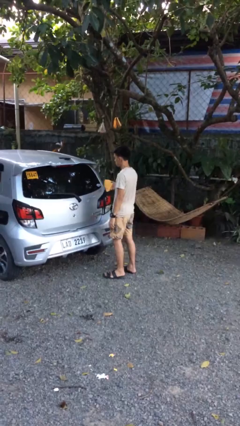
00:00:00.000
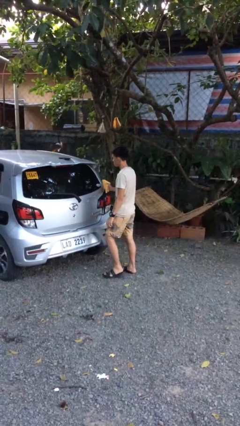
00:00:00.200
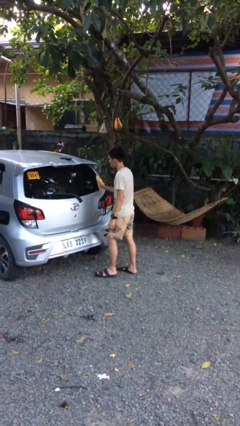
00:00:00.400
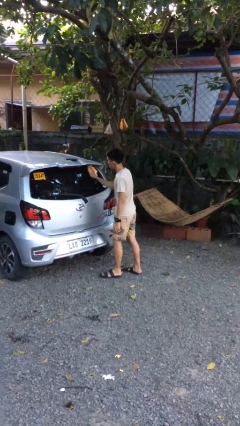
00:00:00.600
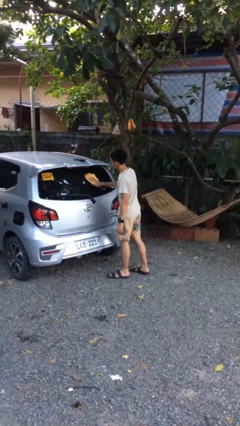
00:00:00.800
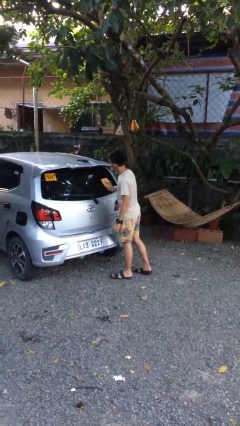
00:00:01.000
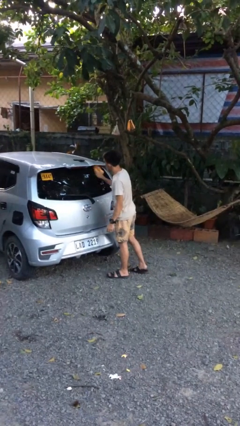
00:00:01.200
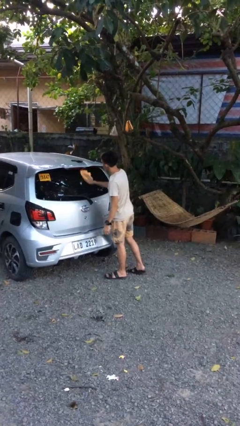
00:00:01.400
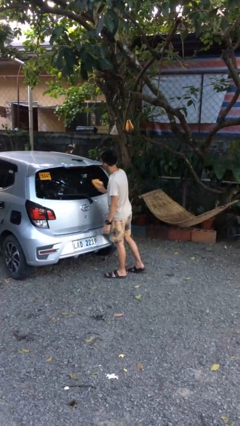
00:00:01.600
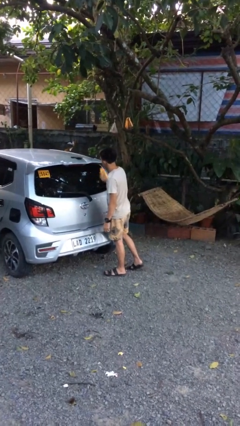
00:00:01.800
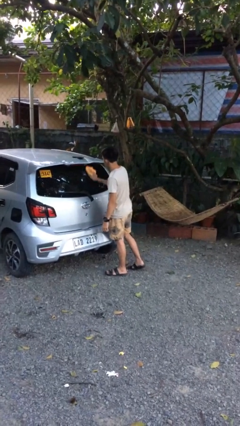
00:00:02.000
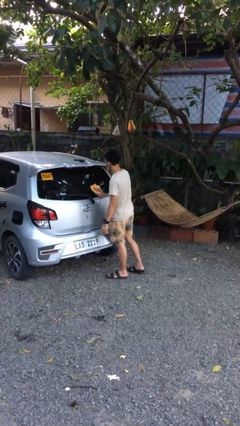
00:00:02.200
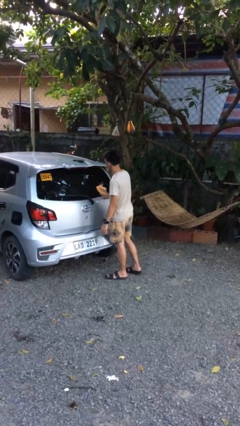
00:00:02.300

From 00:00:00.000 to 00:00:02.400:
person polishes car with rag

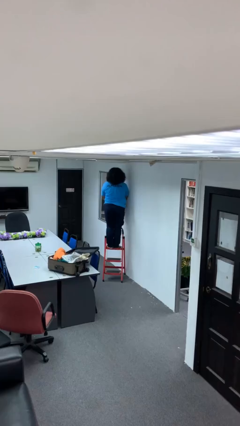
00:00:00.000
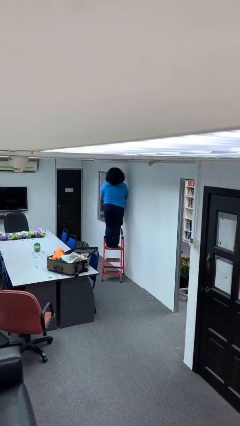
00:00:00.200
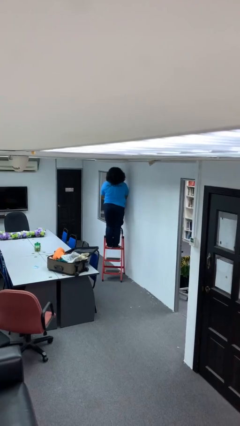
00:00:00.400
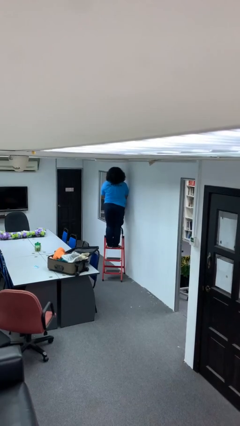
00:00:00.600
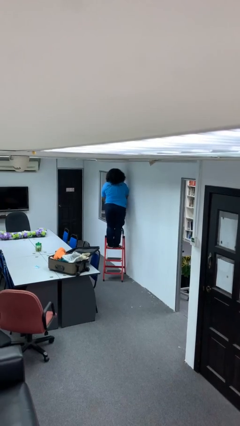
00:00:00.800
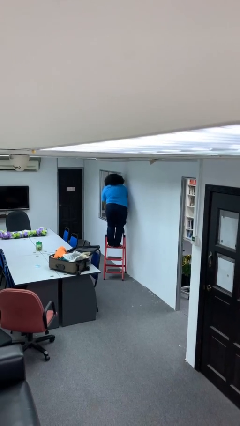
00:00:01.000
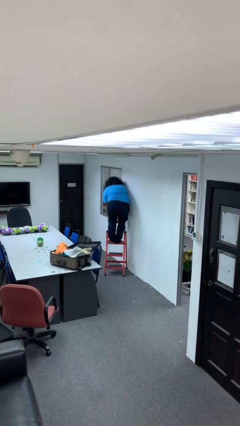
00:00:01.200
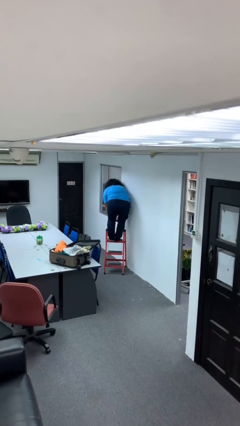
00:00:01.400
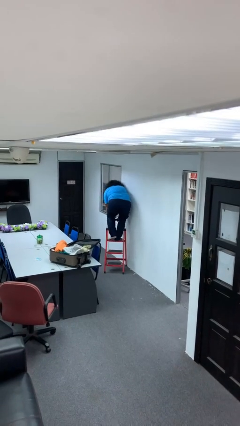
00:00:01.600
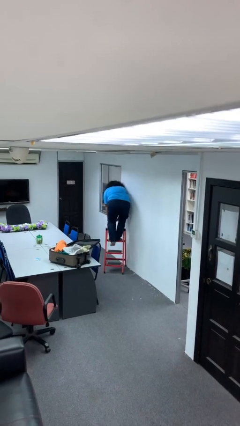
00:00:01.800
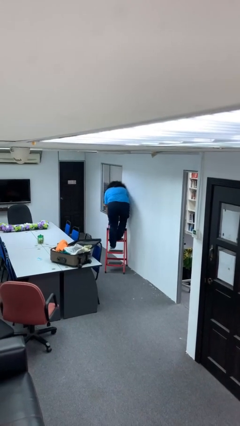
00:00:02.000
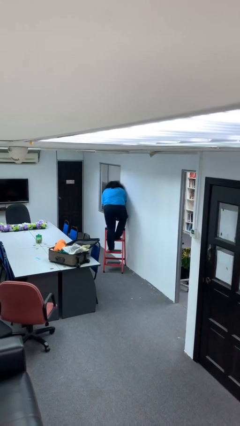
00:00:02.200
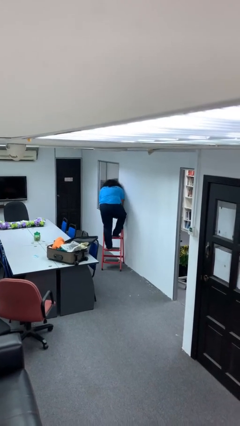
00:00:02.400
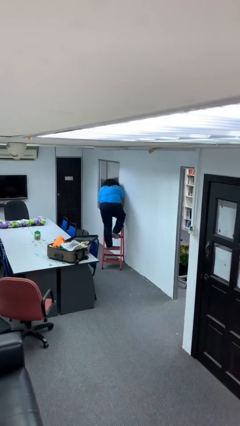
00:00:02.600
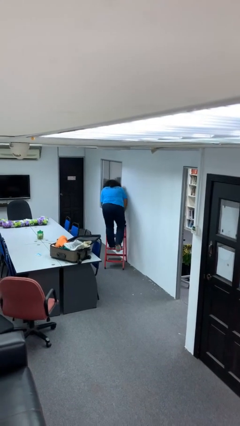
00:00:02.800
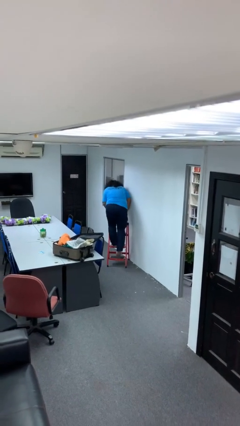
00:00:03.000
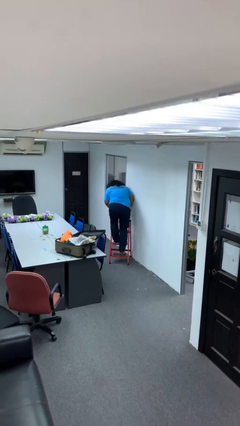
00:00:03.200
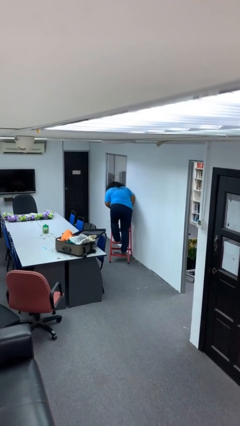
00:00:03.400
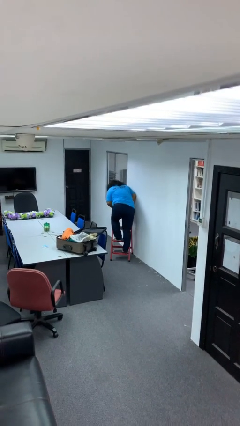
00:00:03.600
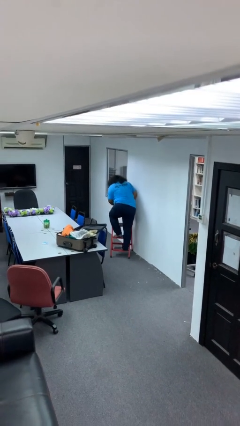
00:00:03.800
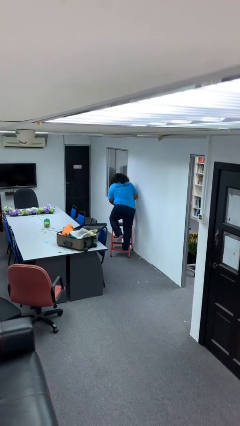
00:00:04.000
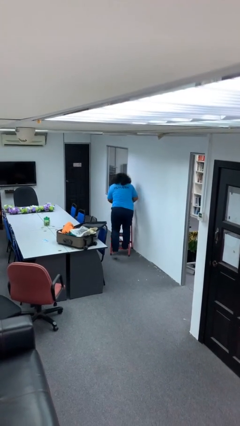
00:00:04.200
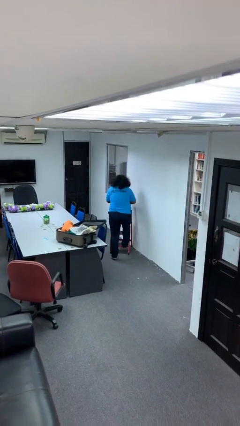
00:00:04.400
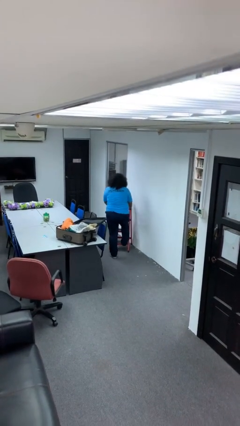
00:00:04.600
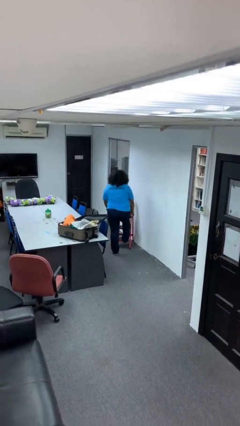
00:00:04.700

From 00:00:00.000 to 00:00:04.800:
person climbs down ladder

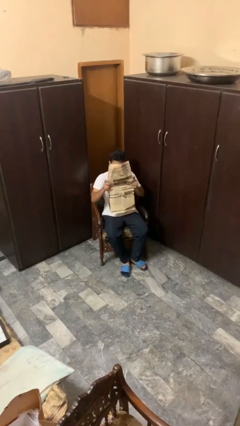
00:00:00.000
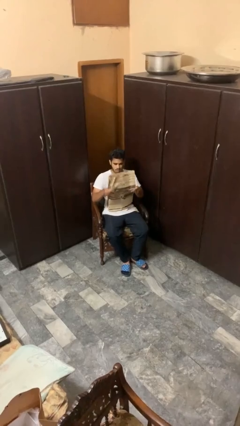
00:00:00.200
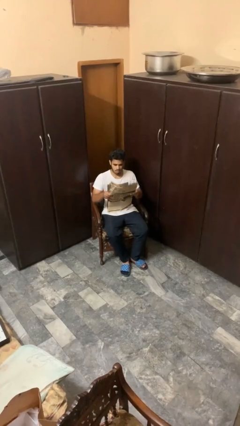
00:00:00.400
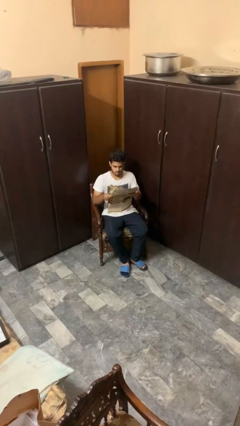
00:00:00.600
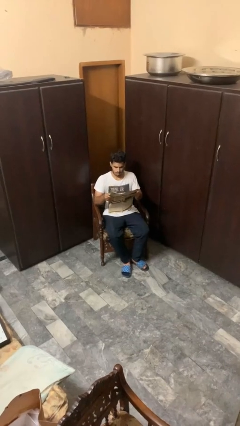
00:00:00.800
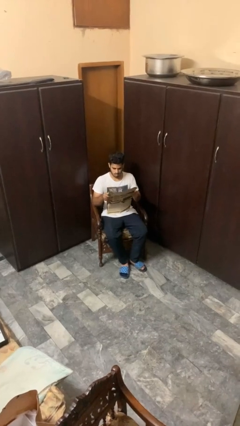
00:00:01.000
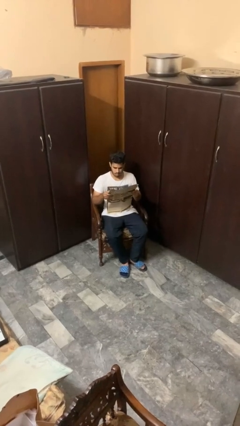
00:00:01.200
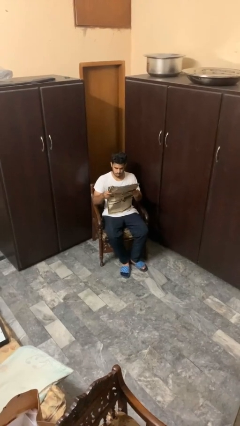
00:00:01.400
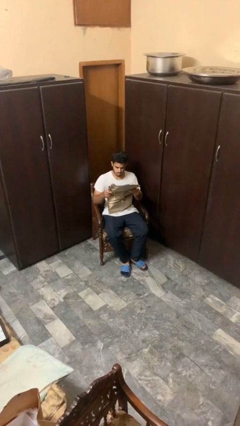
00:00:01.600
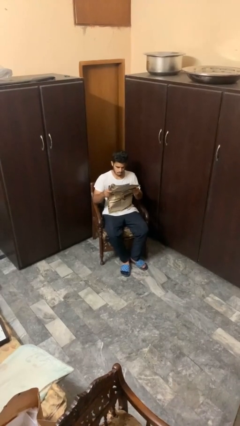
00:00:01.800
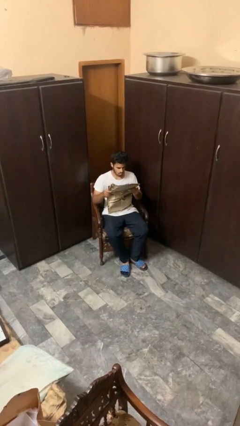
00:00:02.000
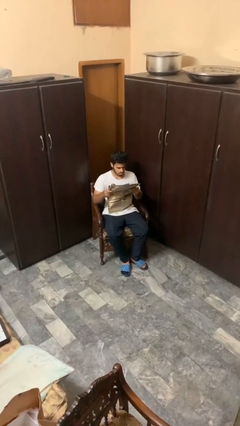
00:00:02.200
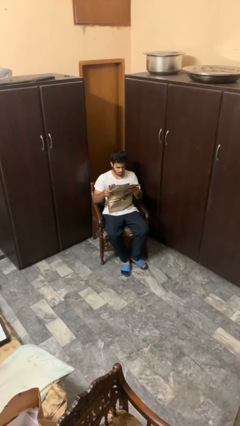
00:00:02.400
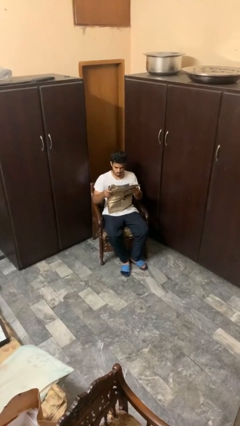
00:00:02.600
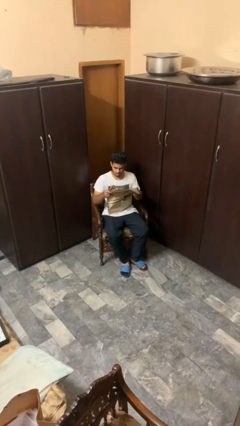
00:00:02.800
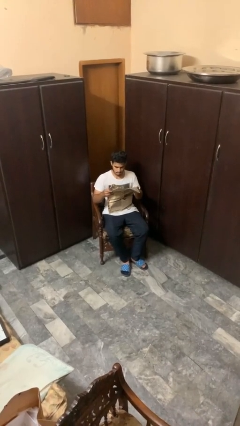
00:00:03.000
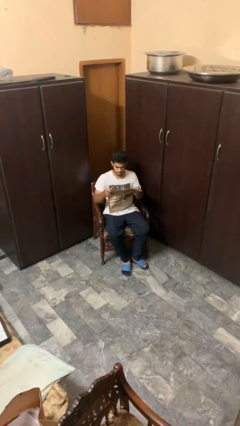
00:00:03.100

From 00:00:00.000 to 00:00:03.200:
person reads newspaper

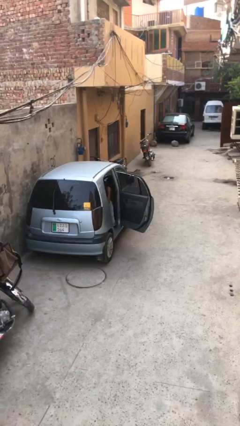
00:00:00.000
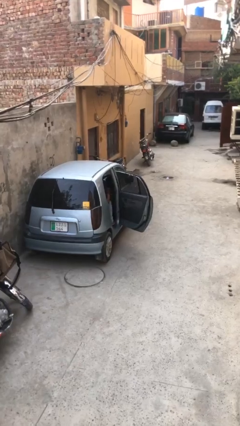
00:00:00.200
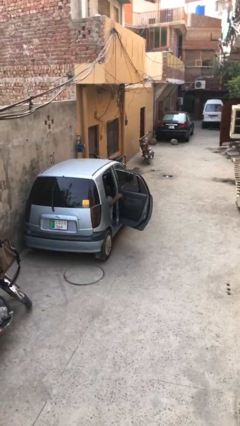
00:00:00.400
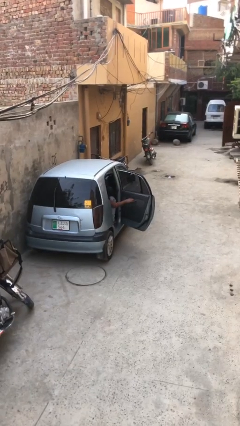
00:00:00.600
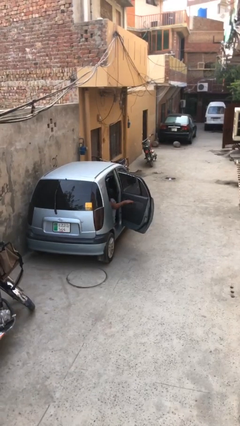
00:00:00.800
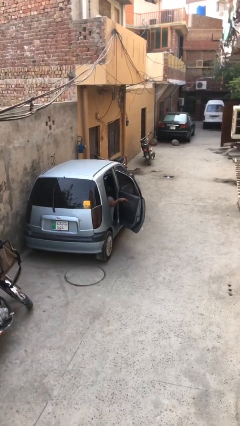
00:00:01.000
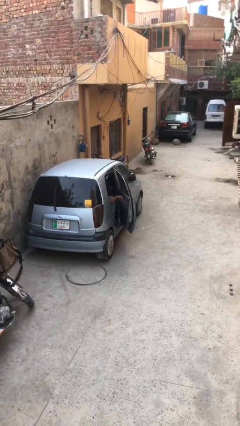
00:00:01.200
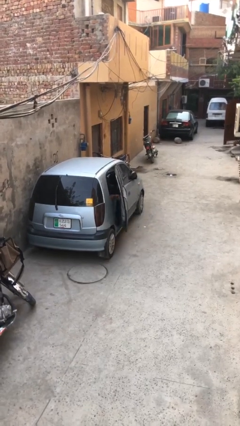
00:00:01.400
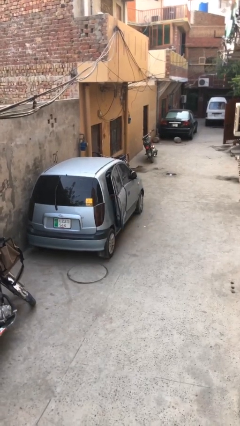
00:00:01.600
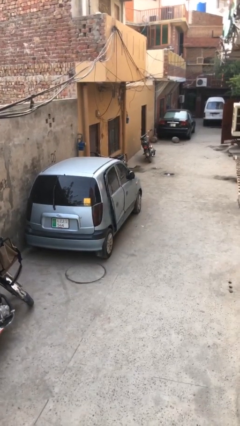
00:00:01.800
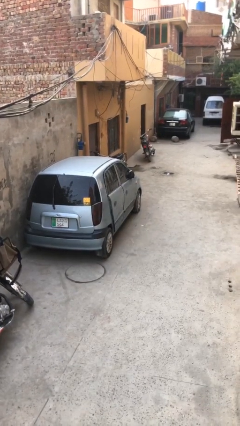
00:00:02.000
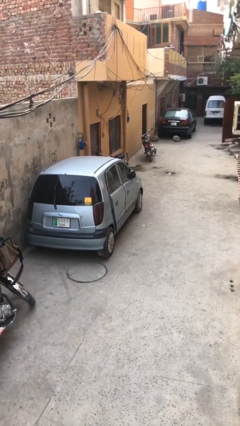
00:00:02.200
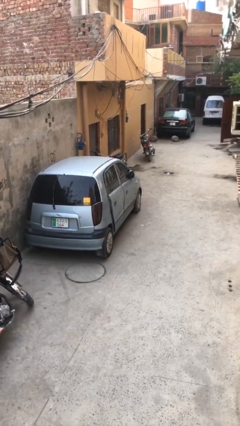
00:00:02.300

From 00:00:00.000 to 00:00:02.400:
person closes car door

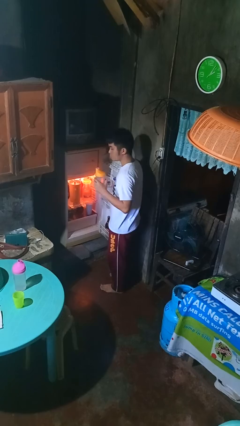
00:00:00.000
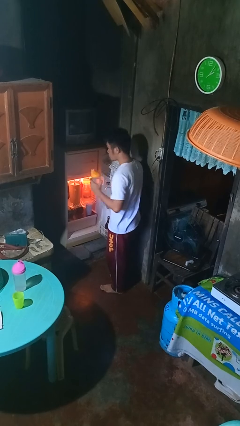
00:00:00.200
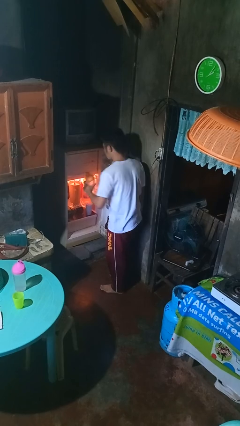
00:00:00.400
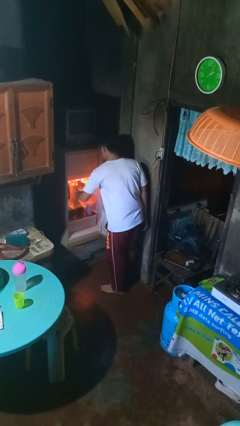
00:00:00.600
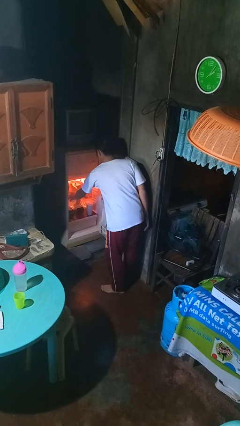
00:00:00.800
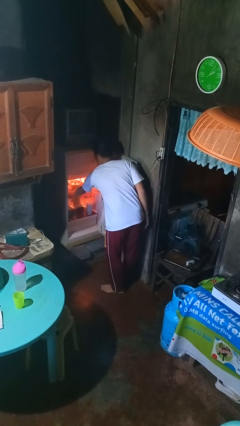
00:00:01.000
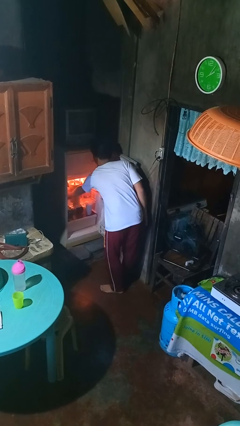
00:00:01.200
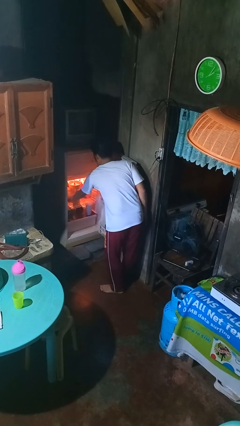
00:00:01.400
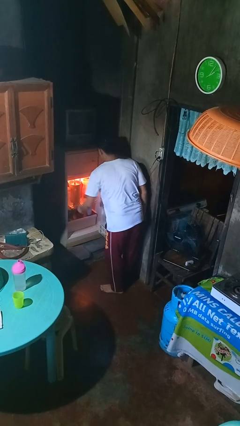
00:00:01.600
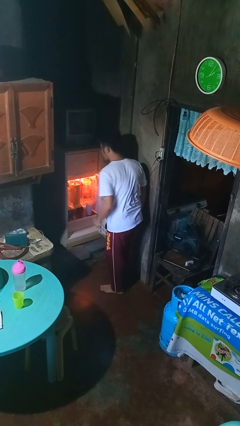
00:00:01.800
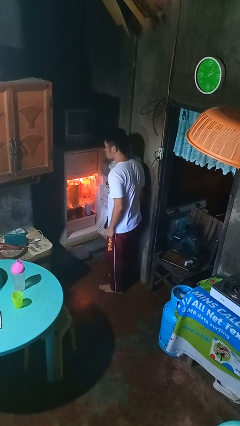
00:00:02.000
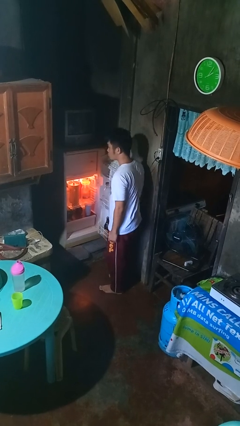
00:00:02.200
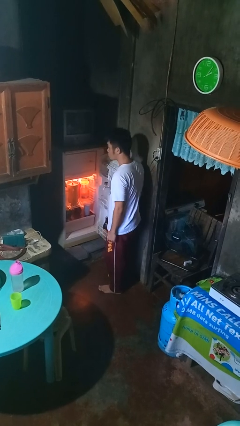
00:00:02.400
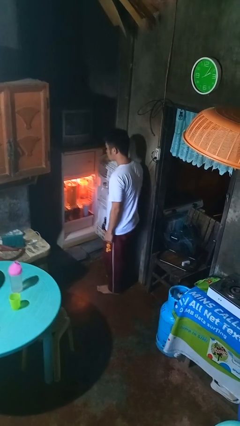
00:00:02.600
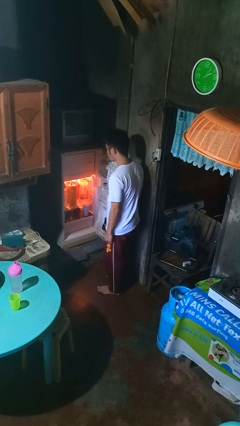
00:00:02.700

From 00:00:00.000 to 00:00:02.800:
person puts object into refrigerator

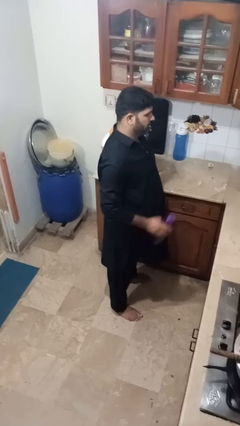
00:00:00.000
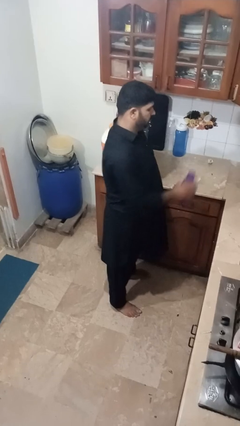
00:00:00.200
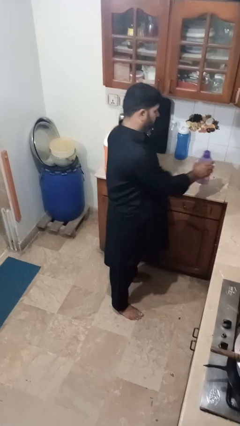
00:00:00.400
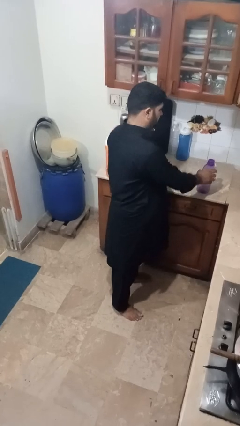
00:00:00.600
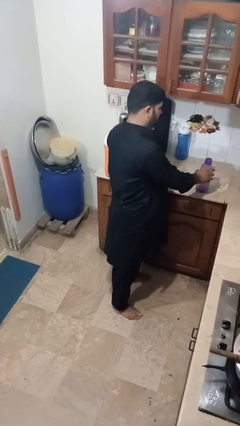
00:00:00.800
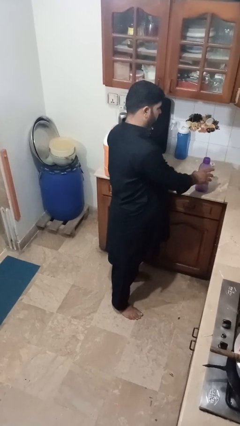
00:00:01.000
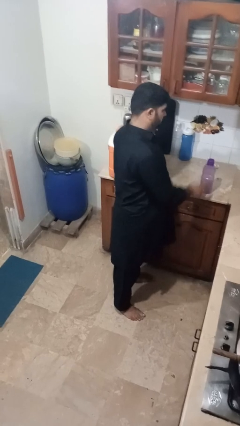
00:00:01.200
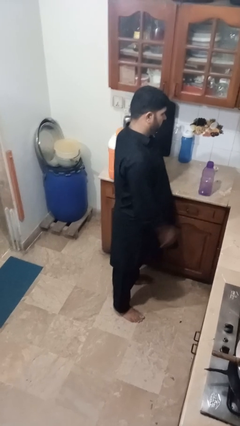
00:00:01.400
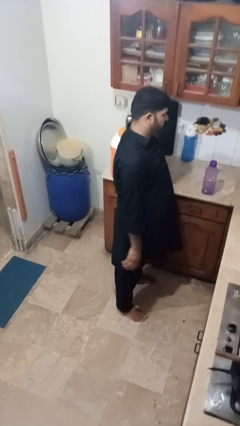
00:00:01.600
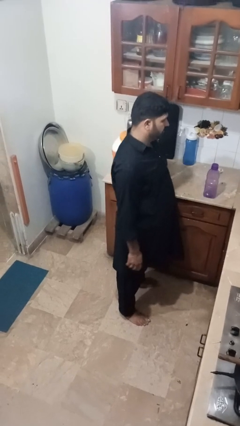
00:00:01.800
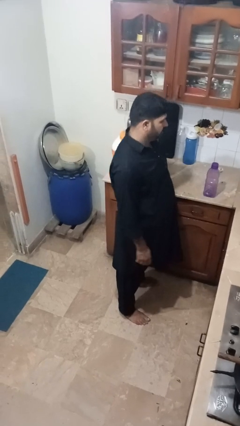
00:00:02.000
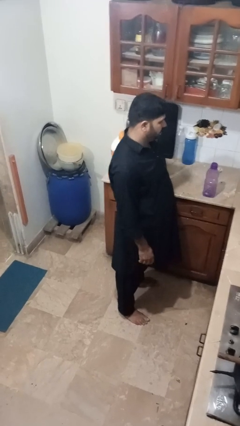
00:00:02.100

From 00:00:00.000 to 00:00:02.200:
person puts down object on countertop
